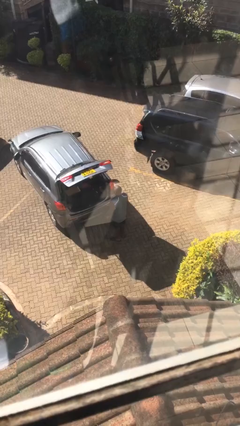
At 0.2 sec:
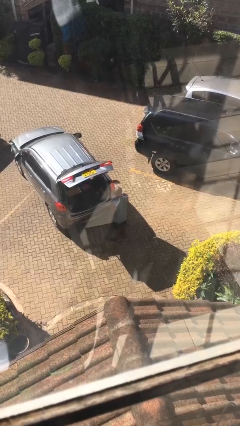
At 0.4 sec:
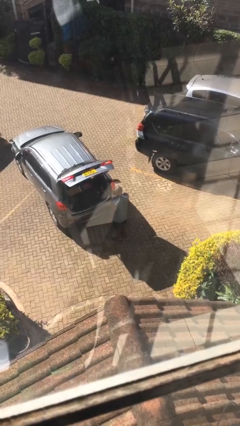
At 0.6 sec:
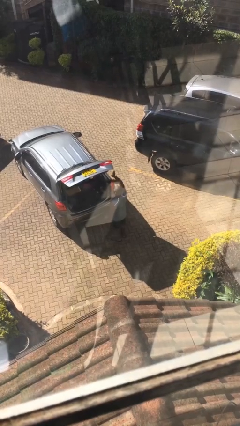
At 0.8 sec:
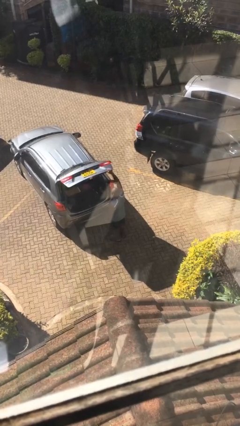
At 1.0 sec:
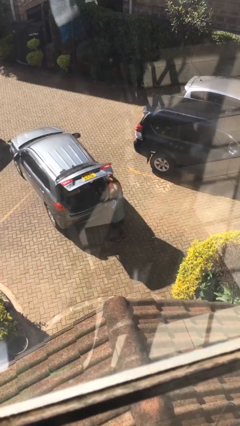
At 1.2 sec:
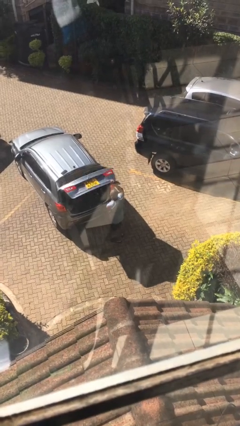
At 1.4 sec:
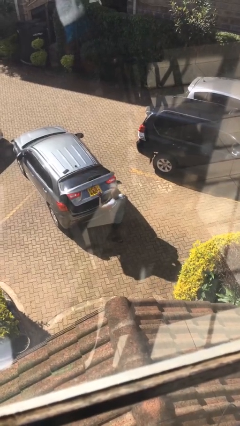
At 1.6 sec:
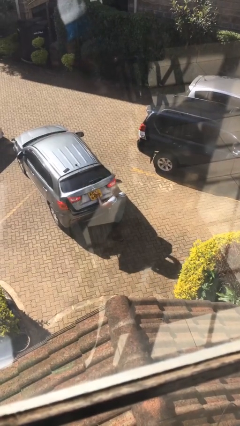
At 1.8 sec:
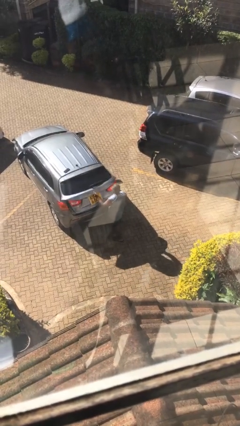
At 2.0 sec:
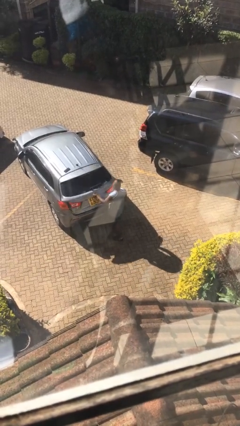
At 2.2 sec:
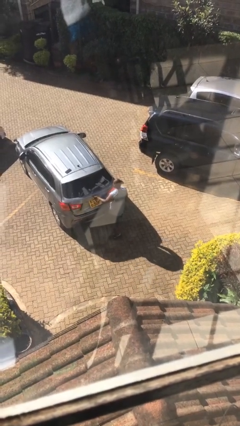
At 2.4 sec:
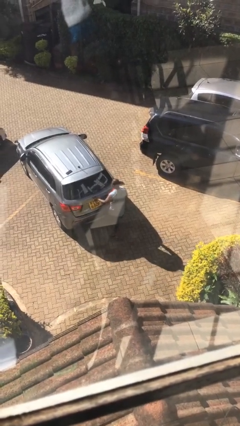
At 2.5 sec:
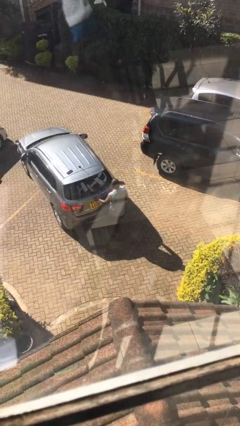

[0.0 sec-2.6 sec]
person closes car trunk

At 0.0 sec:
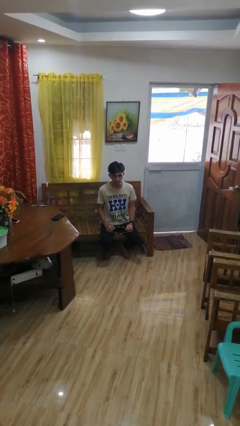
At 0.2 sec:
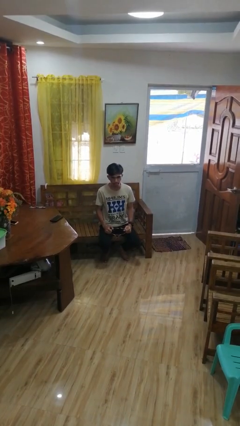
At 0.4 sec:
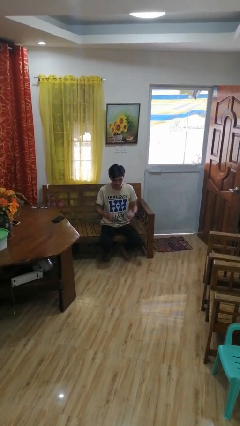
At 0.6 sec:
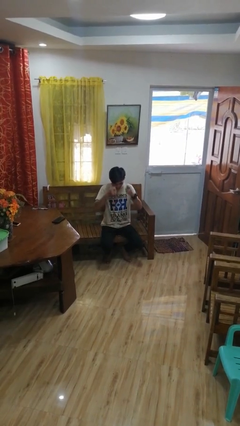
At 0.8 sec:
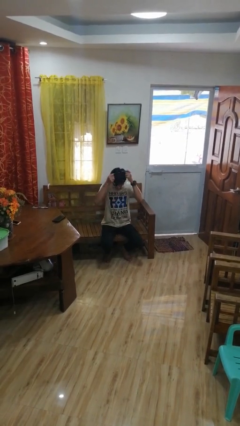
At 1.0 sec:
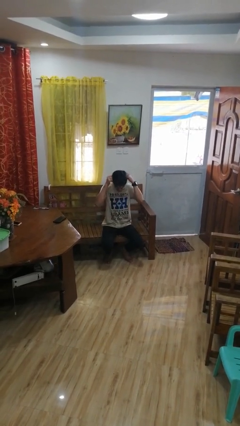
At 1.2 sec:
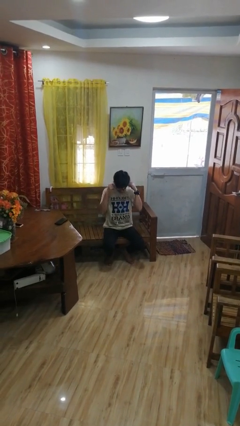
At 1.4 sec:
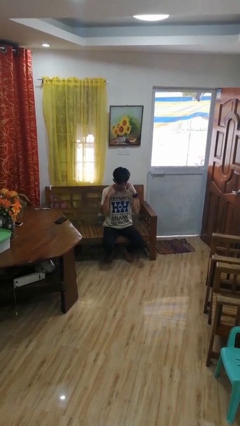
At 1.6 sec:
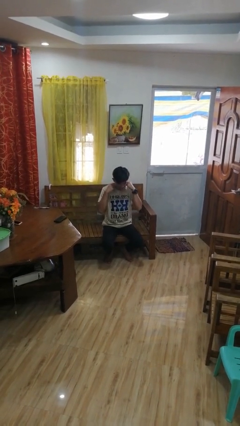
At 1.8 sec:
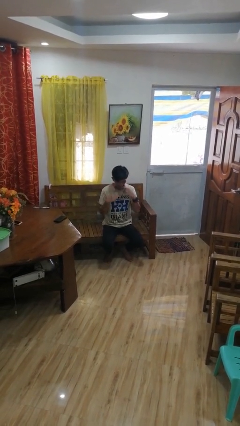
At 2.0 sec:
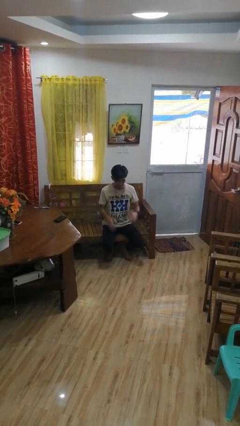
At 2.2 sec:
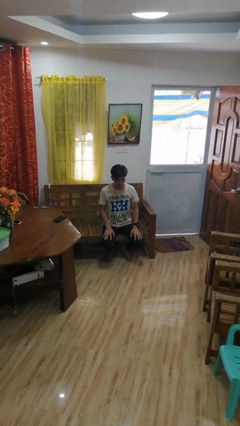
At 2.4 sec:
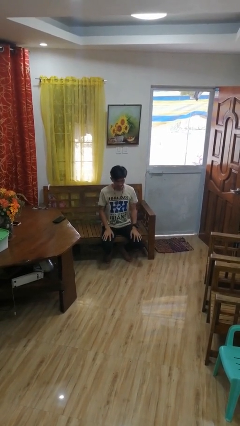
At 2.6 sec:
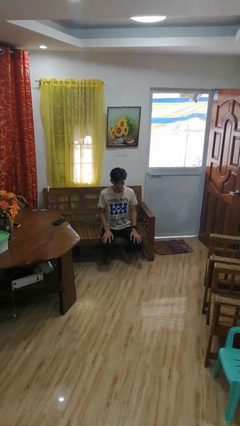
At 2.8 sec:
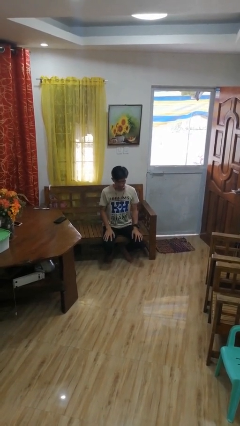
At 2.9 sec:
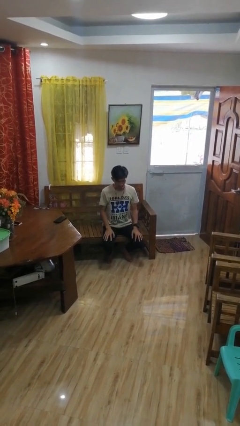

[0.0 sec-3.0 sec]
person puts on necklace

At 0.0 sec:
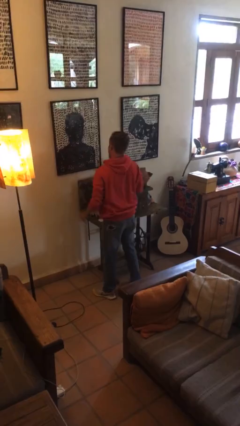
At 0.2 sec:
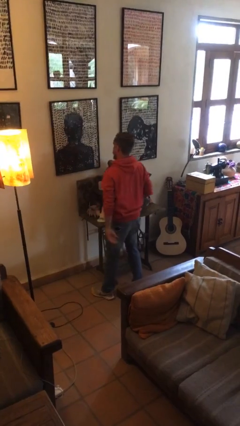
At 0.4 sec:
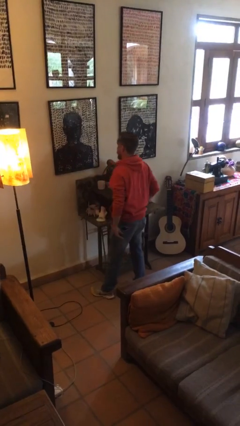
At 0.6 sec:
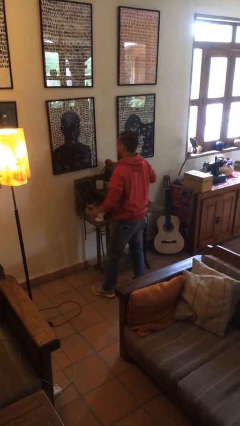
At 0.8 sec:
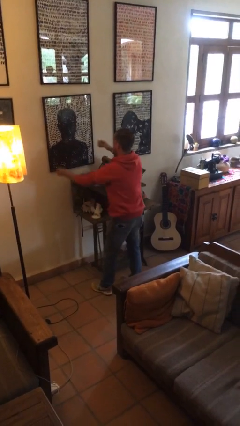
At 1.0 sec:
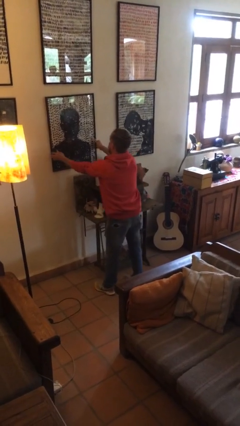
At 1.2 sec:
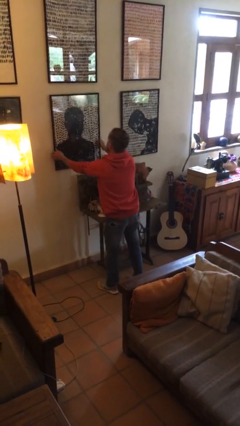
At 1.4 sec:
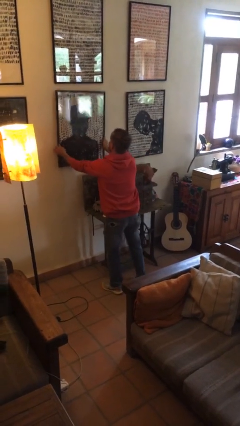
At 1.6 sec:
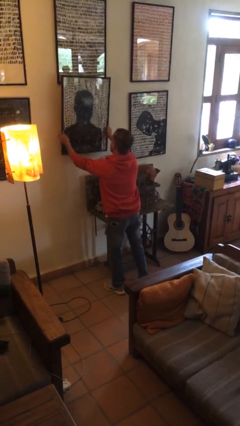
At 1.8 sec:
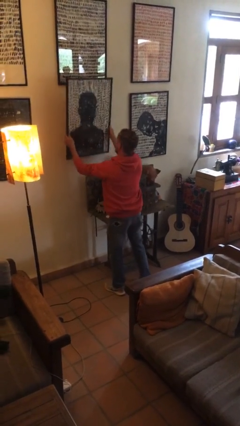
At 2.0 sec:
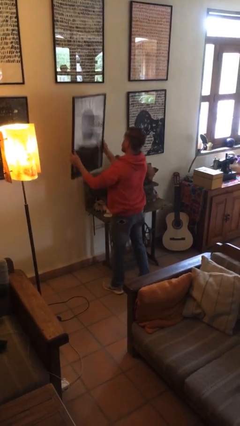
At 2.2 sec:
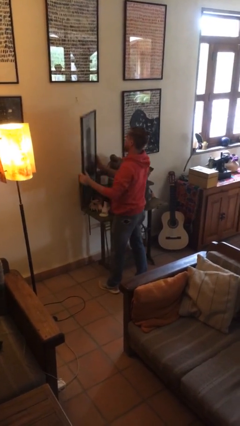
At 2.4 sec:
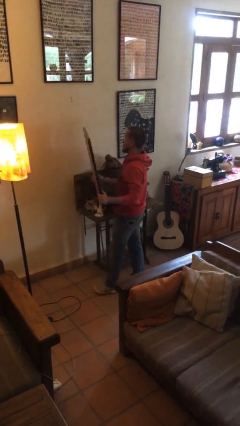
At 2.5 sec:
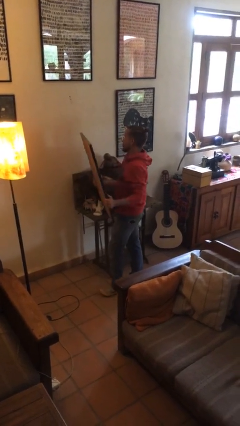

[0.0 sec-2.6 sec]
person takes down picture frame

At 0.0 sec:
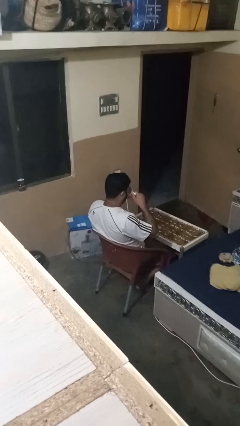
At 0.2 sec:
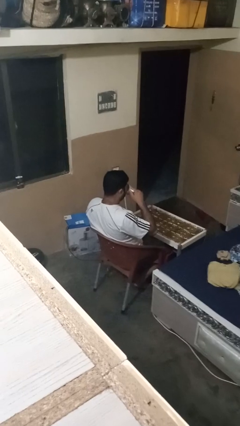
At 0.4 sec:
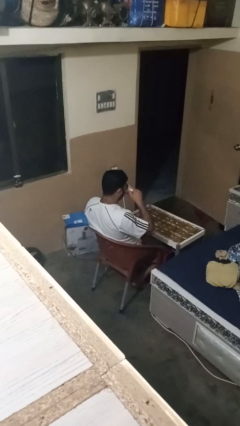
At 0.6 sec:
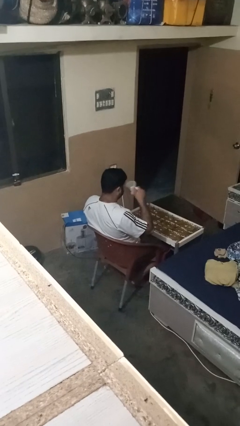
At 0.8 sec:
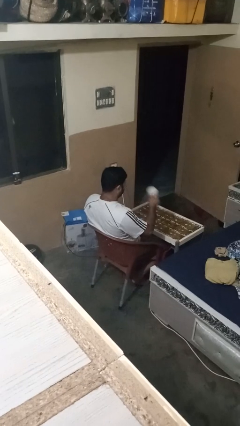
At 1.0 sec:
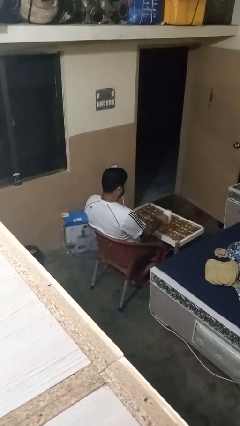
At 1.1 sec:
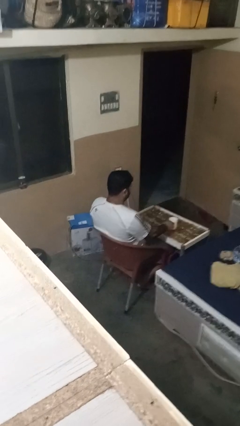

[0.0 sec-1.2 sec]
person puts down object on table

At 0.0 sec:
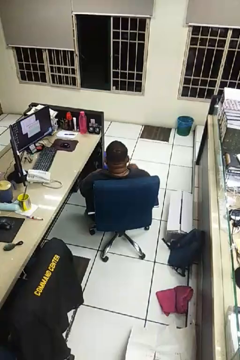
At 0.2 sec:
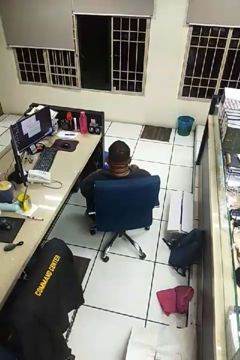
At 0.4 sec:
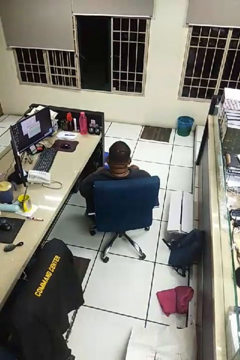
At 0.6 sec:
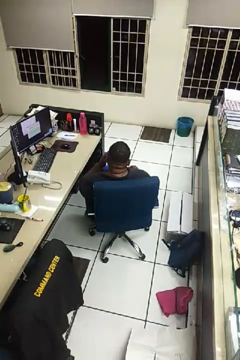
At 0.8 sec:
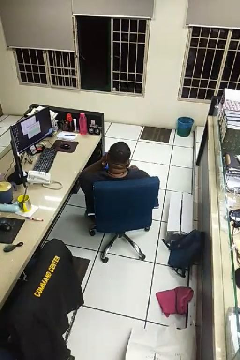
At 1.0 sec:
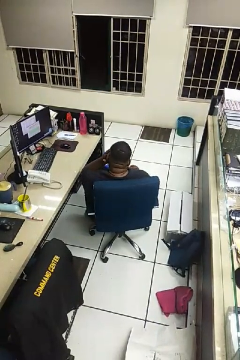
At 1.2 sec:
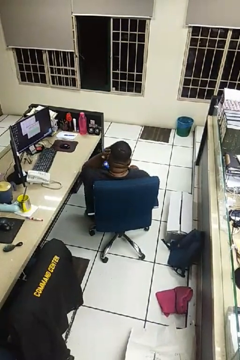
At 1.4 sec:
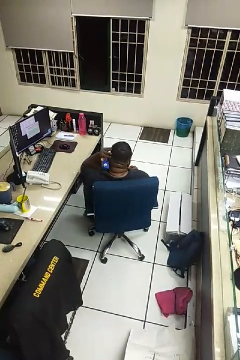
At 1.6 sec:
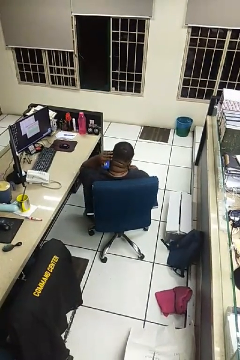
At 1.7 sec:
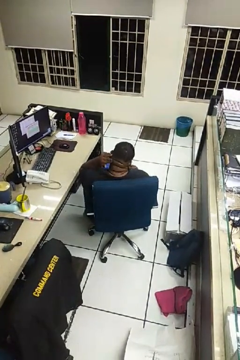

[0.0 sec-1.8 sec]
person strokes hair

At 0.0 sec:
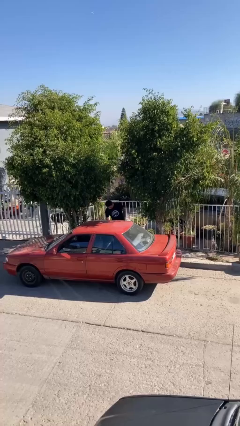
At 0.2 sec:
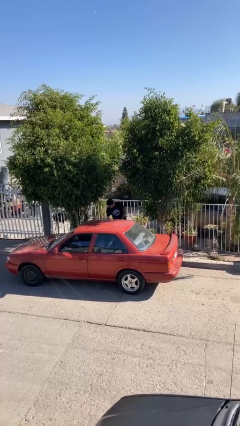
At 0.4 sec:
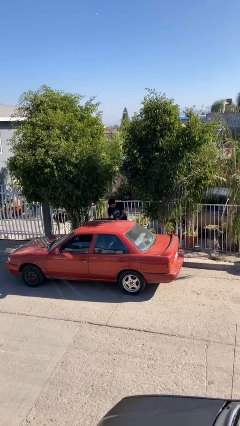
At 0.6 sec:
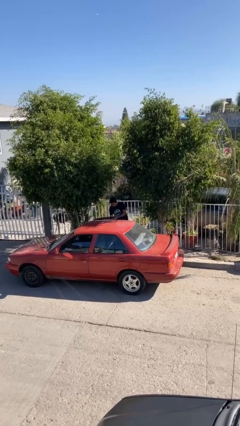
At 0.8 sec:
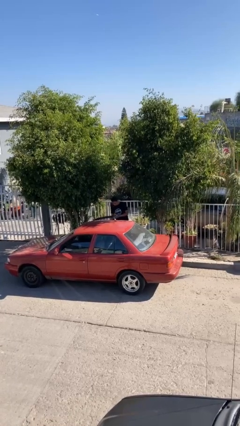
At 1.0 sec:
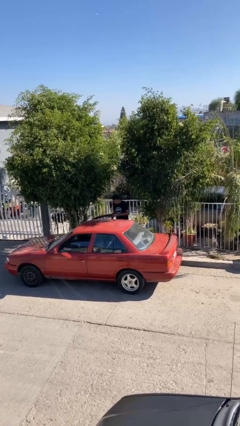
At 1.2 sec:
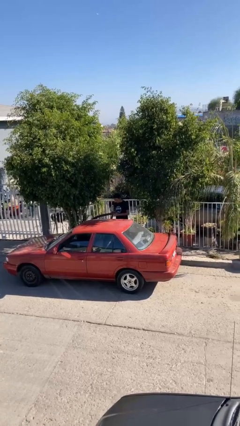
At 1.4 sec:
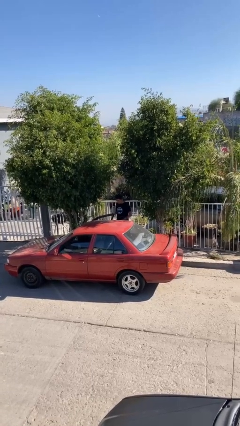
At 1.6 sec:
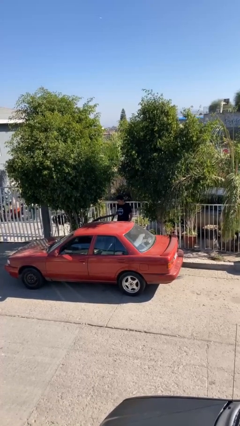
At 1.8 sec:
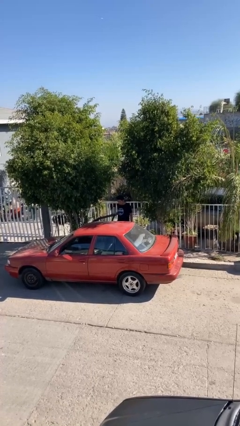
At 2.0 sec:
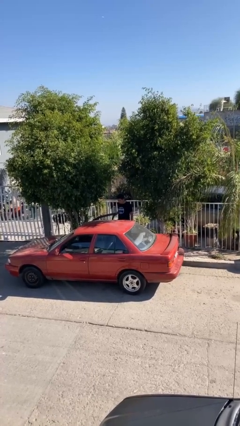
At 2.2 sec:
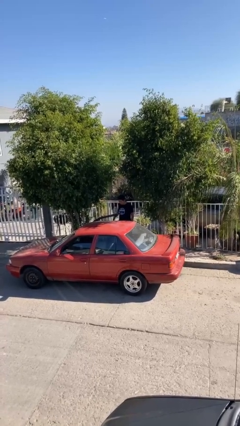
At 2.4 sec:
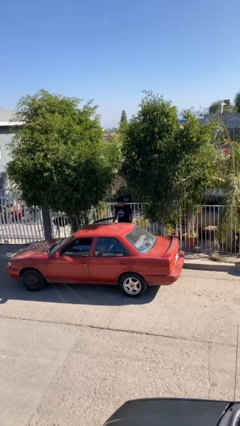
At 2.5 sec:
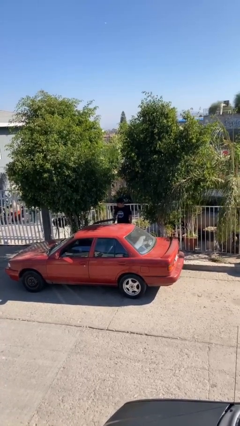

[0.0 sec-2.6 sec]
person opens car door

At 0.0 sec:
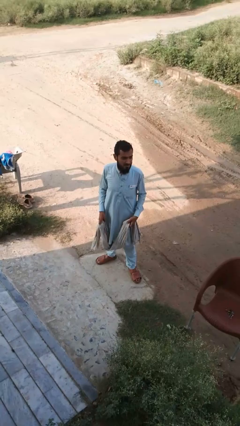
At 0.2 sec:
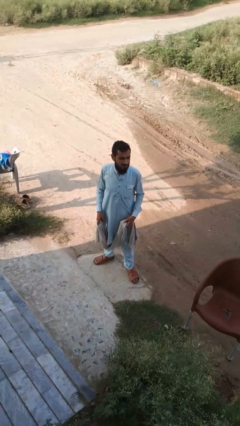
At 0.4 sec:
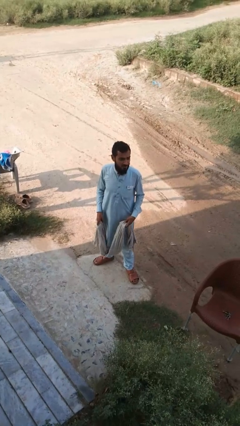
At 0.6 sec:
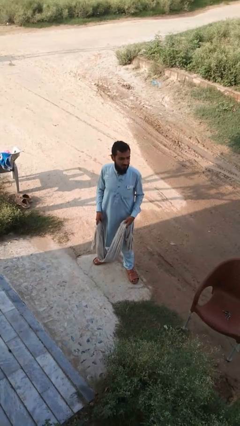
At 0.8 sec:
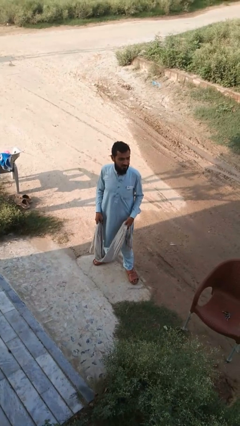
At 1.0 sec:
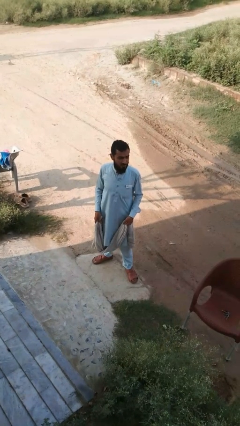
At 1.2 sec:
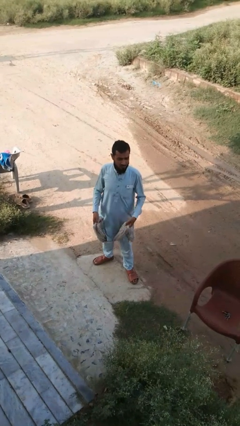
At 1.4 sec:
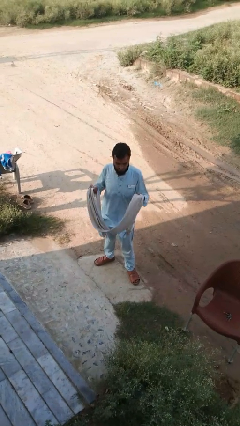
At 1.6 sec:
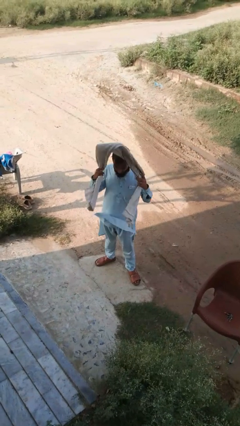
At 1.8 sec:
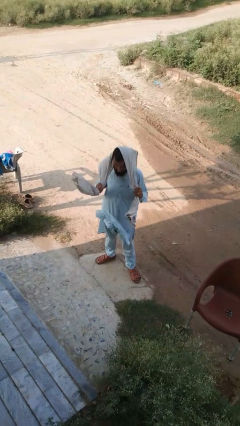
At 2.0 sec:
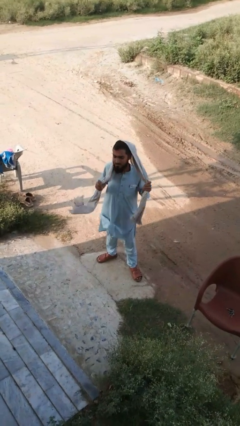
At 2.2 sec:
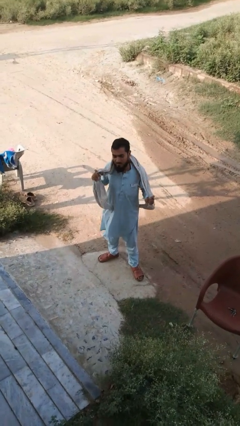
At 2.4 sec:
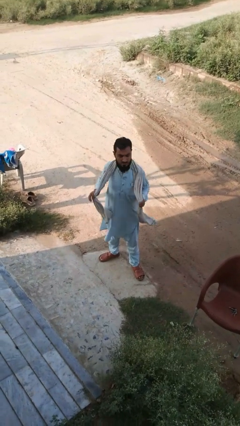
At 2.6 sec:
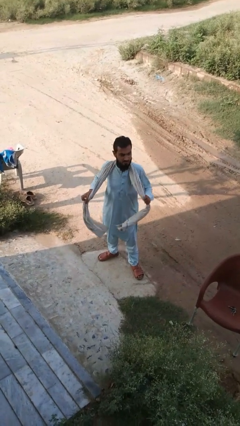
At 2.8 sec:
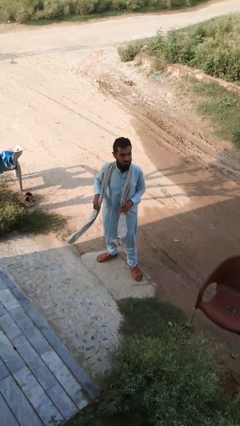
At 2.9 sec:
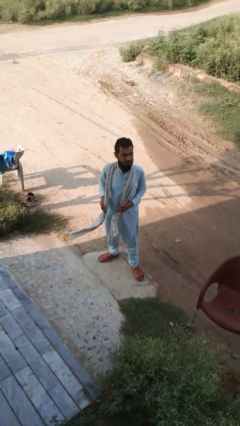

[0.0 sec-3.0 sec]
person puts on scarf

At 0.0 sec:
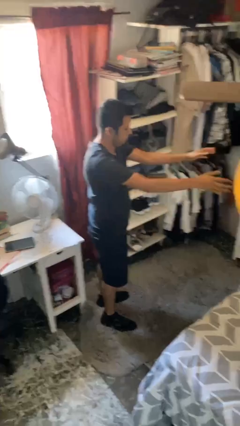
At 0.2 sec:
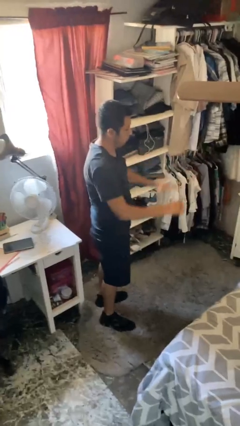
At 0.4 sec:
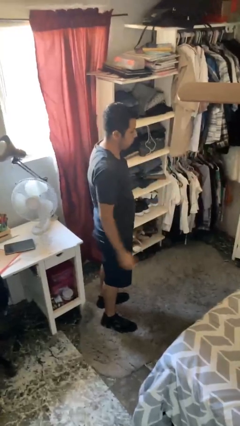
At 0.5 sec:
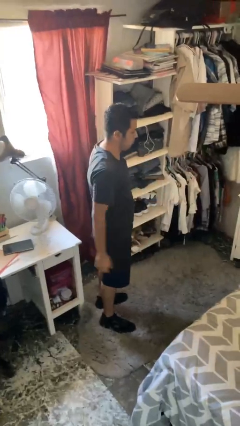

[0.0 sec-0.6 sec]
person throws object on bed
